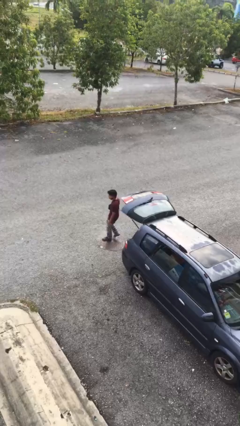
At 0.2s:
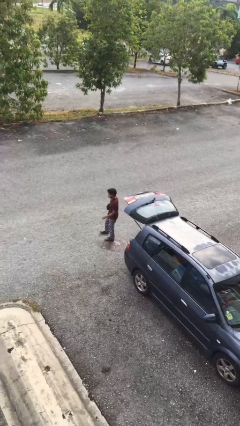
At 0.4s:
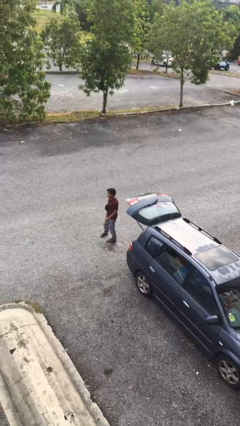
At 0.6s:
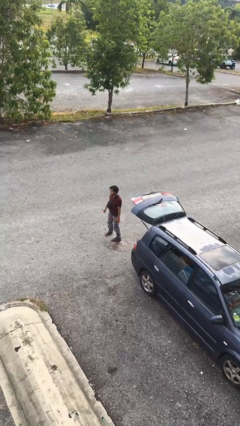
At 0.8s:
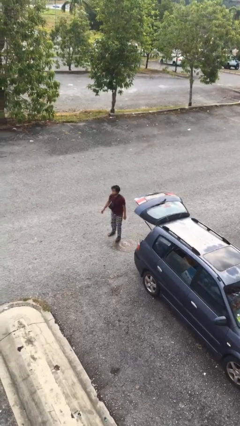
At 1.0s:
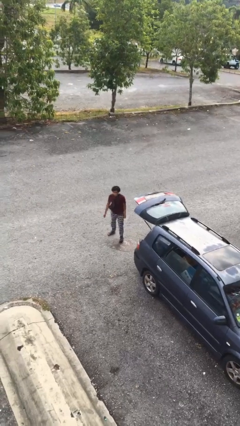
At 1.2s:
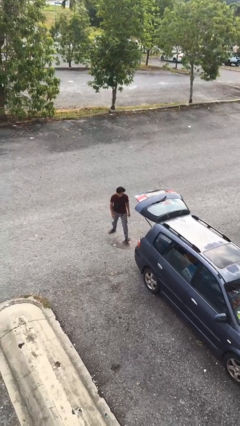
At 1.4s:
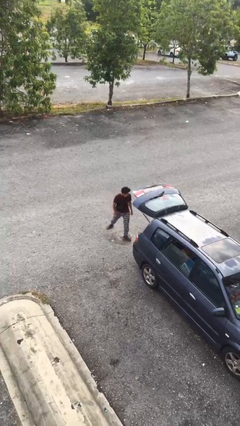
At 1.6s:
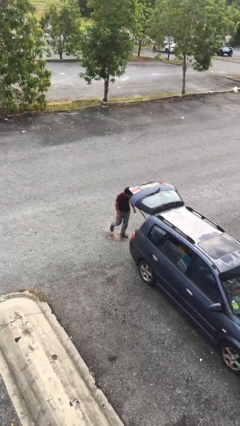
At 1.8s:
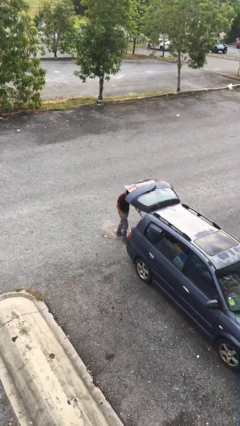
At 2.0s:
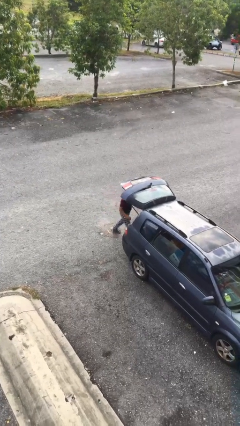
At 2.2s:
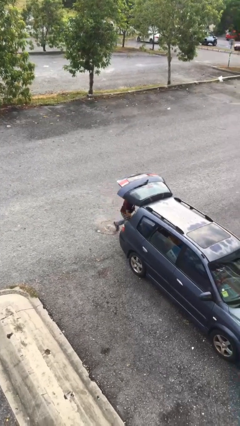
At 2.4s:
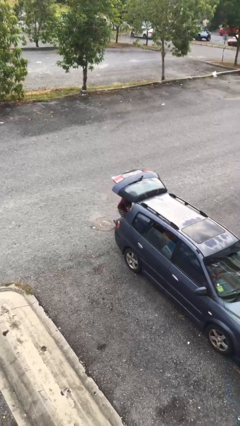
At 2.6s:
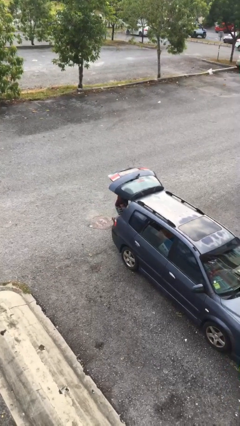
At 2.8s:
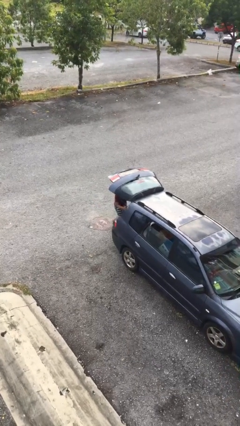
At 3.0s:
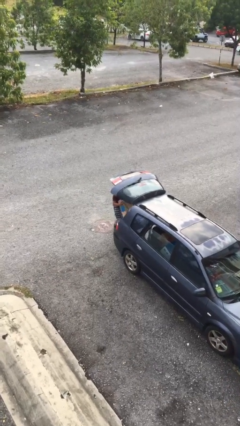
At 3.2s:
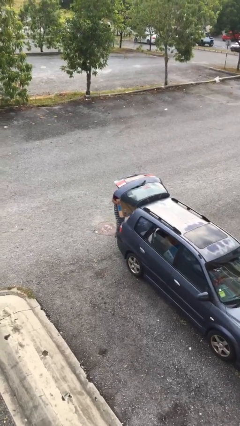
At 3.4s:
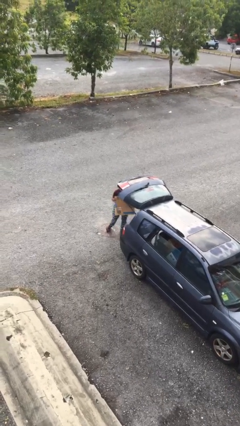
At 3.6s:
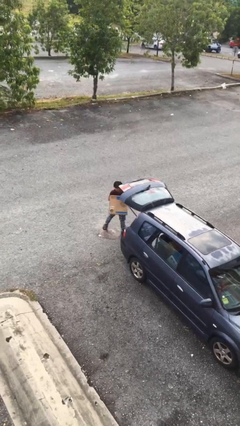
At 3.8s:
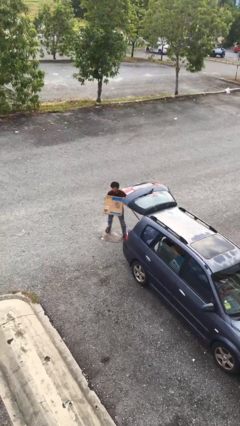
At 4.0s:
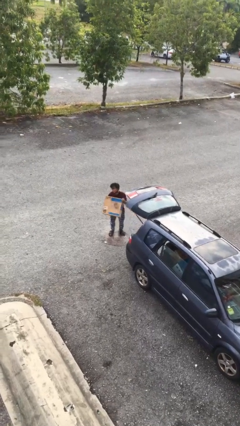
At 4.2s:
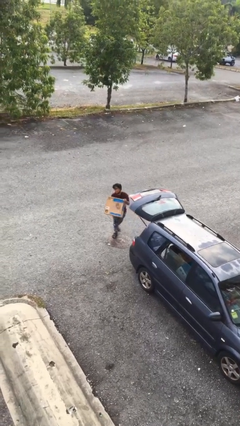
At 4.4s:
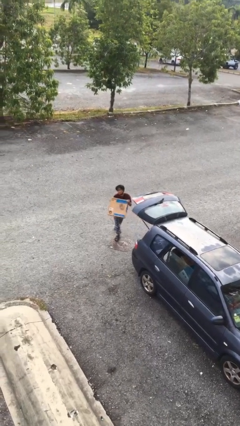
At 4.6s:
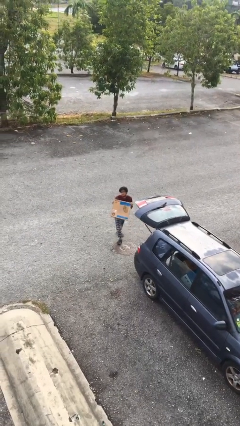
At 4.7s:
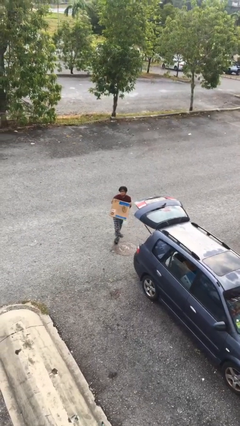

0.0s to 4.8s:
person unloads car

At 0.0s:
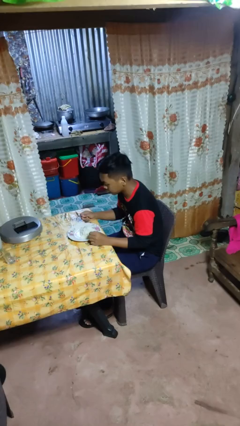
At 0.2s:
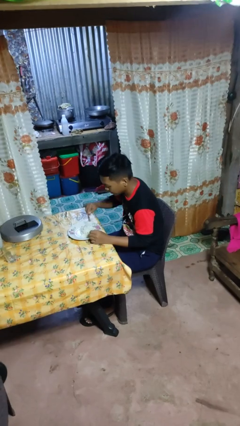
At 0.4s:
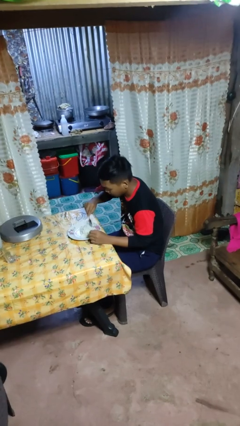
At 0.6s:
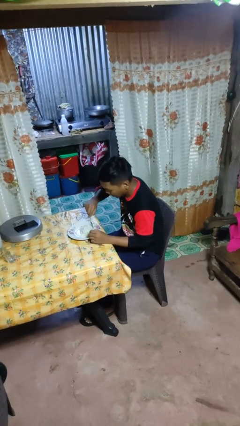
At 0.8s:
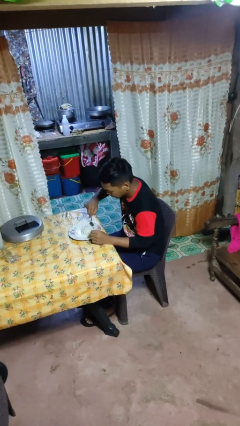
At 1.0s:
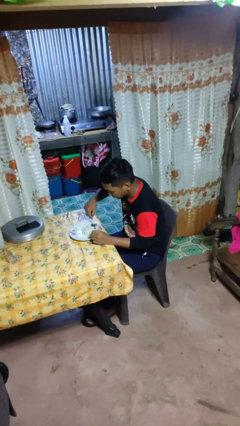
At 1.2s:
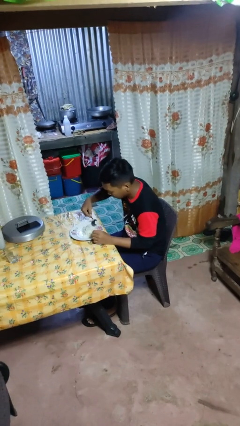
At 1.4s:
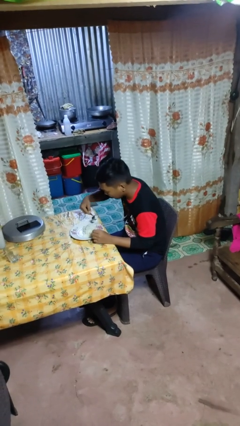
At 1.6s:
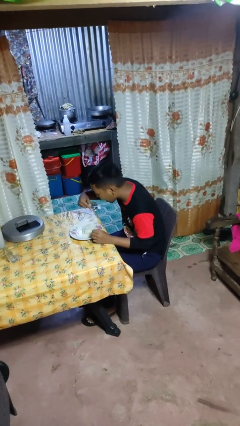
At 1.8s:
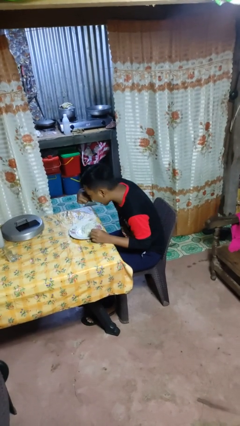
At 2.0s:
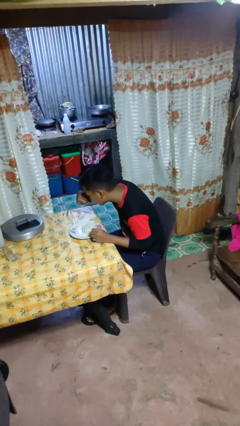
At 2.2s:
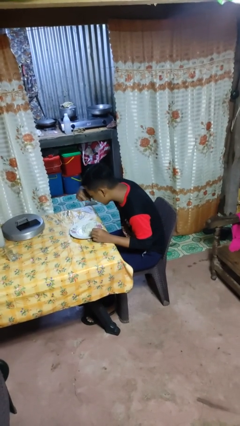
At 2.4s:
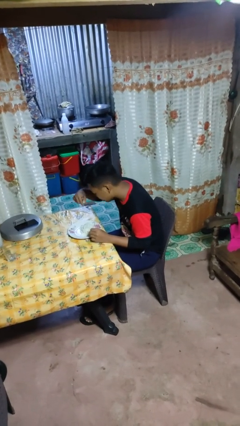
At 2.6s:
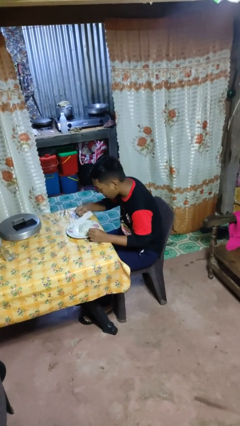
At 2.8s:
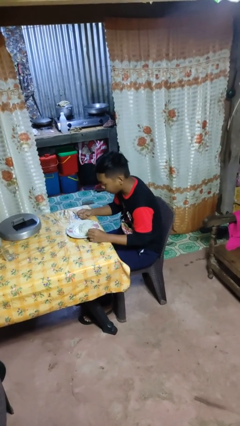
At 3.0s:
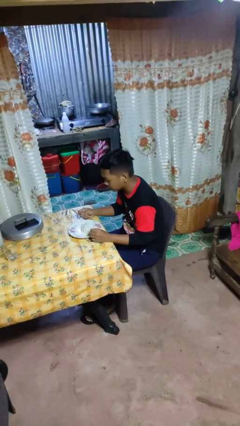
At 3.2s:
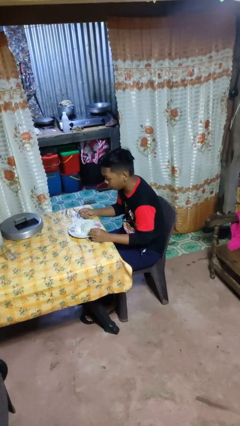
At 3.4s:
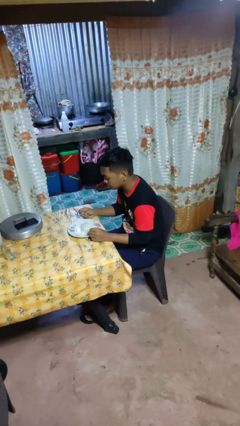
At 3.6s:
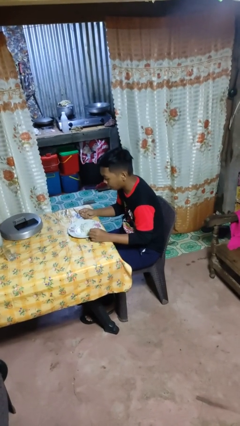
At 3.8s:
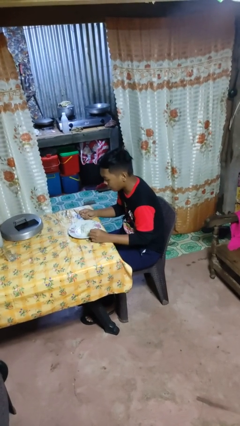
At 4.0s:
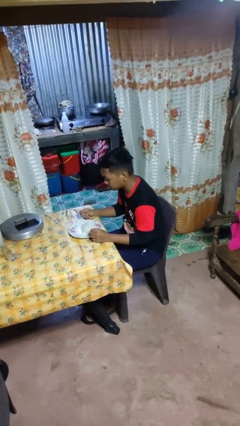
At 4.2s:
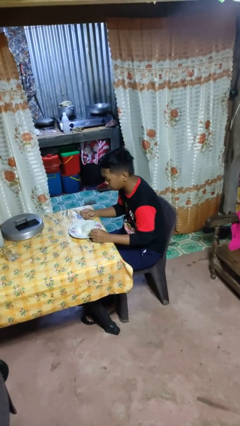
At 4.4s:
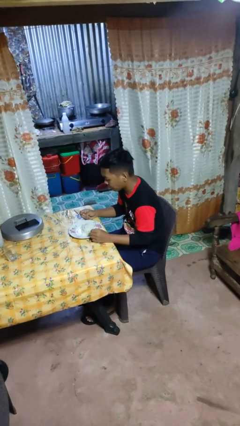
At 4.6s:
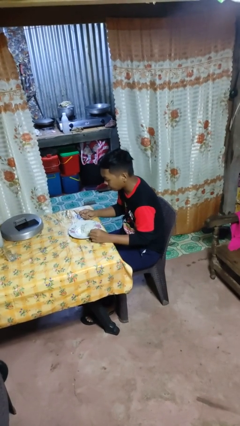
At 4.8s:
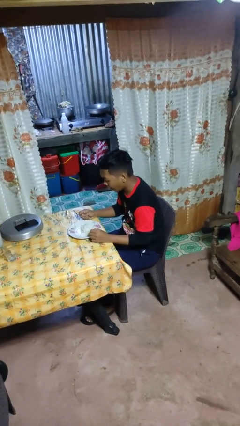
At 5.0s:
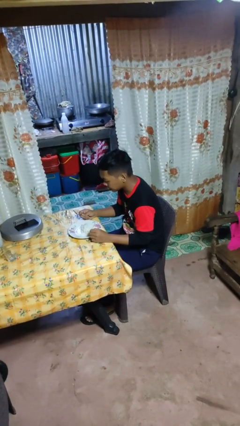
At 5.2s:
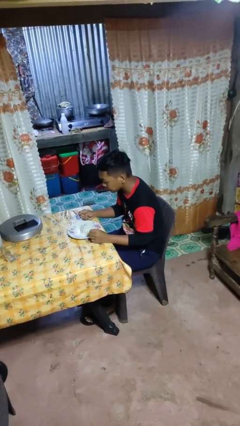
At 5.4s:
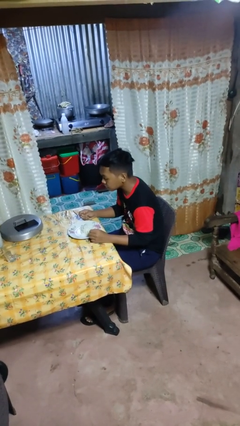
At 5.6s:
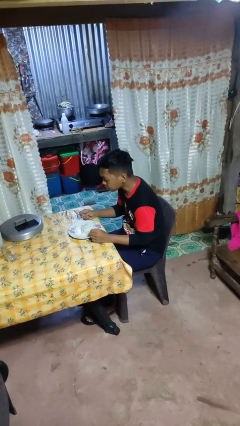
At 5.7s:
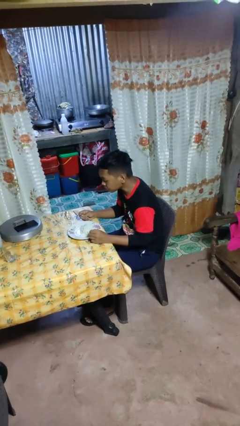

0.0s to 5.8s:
person eats with utensil

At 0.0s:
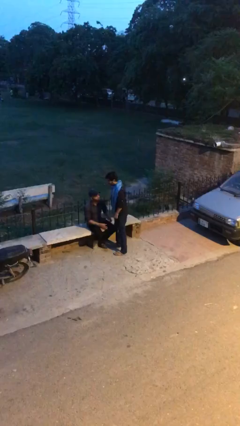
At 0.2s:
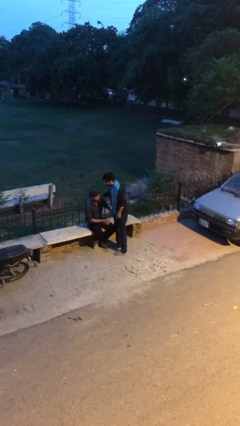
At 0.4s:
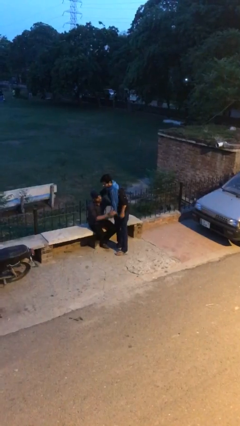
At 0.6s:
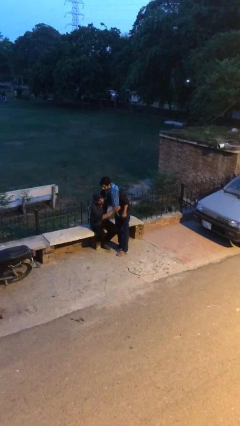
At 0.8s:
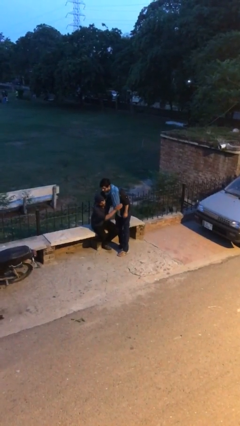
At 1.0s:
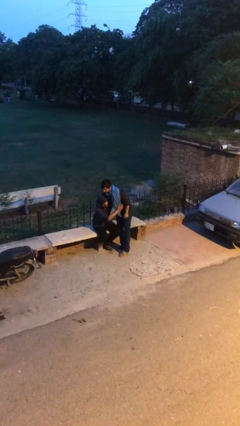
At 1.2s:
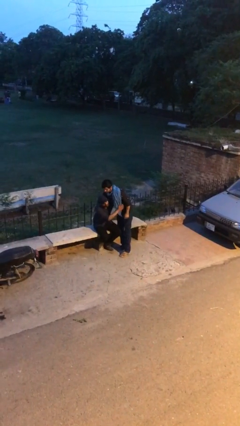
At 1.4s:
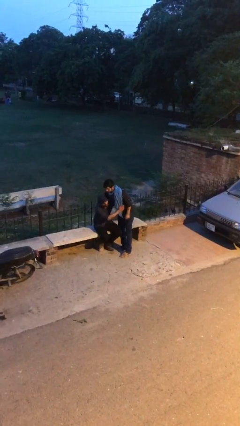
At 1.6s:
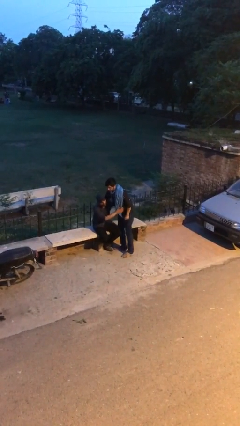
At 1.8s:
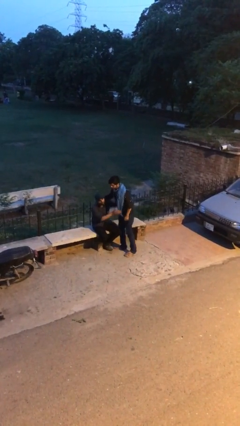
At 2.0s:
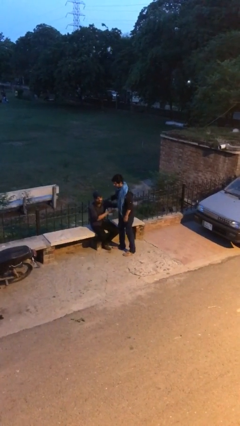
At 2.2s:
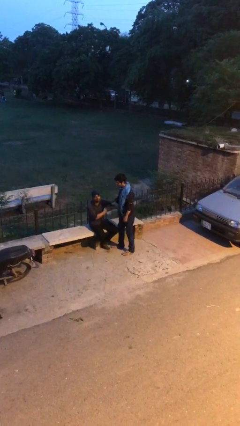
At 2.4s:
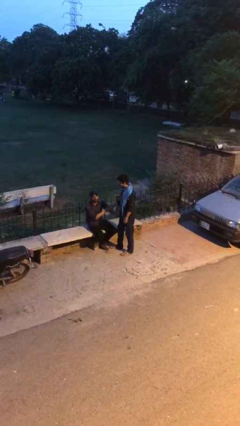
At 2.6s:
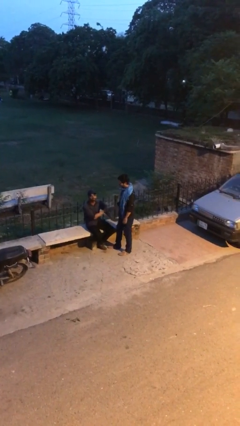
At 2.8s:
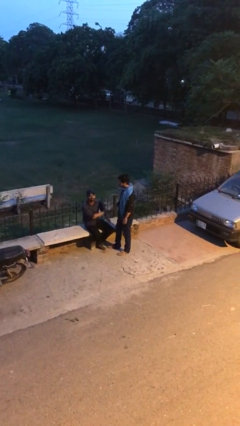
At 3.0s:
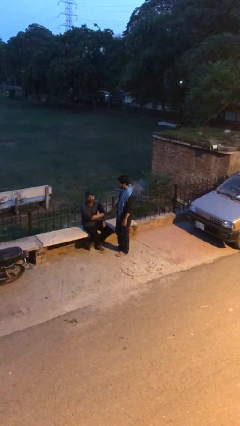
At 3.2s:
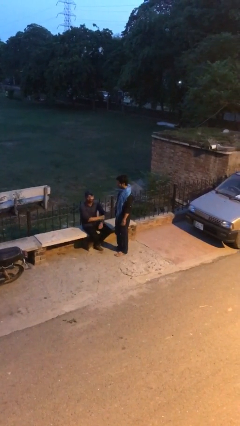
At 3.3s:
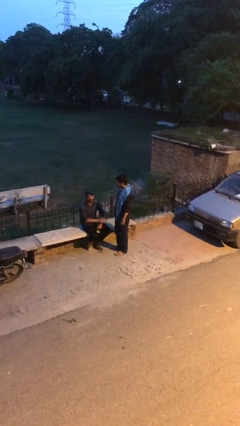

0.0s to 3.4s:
person embraces person

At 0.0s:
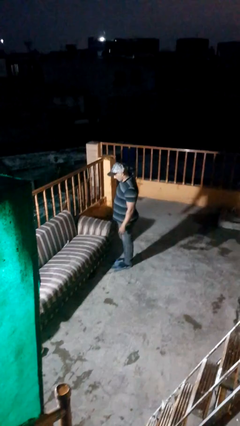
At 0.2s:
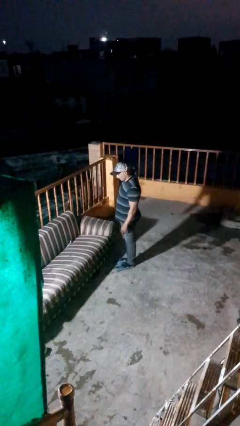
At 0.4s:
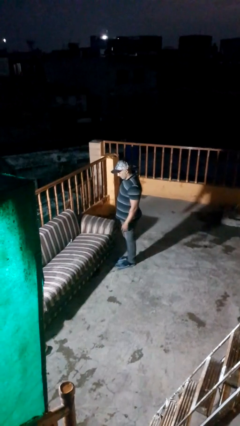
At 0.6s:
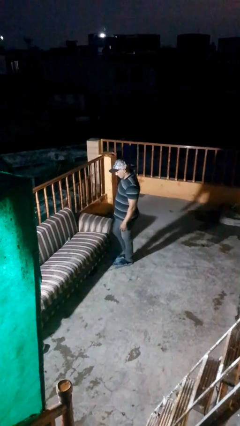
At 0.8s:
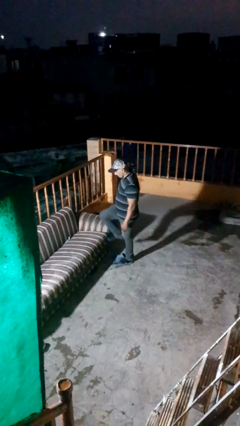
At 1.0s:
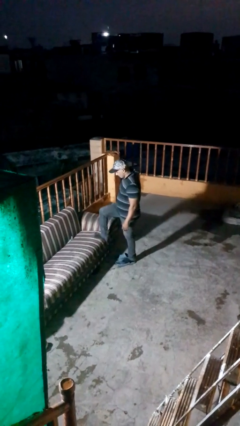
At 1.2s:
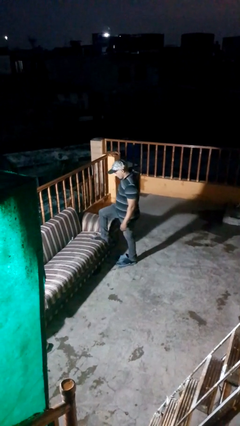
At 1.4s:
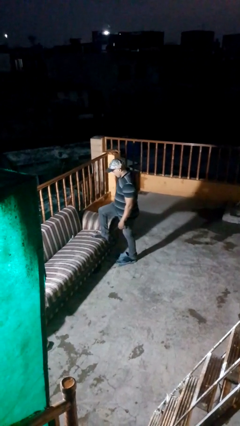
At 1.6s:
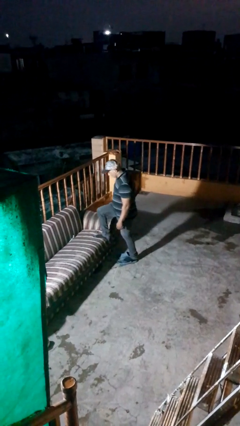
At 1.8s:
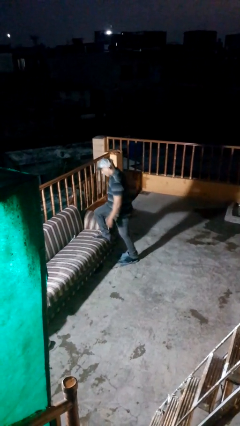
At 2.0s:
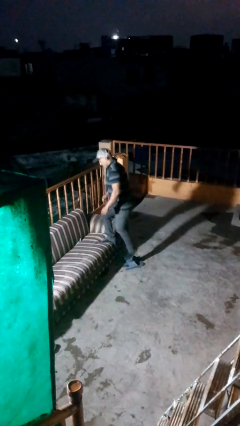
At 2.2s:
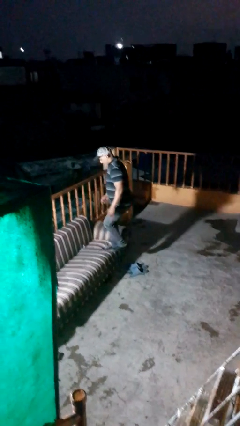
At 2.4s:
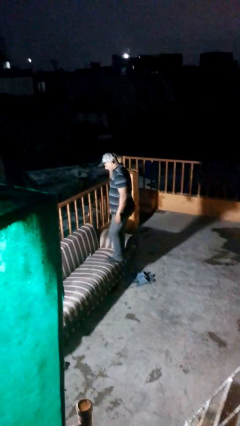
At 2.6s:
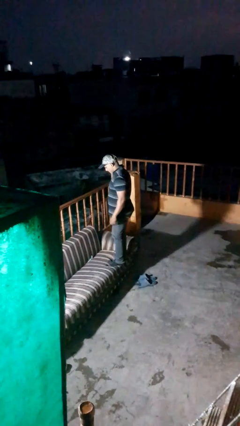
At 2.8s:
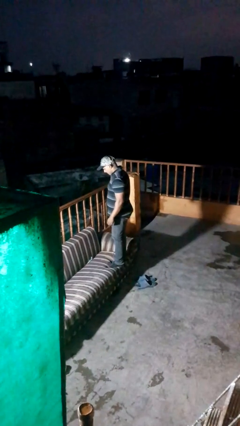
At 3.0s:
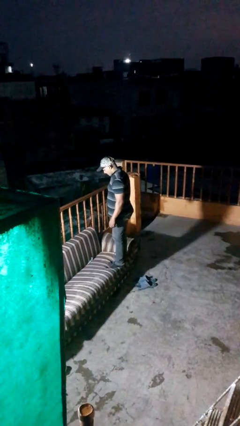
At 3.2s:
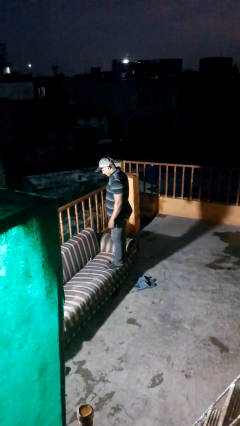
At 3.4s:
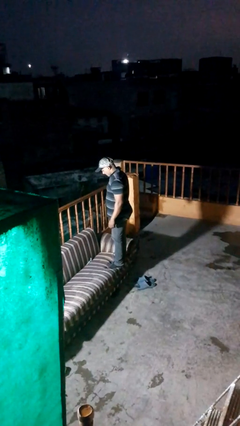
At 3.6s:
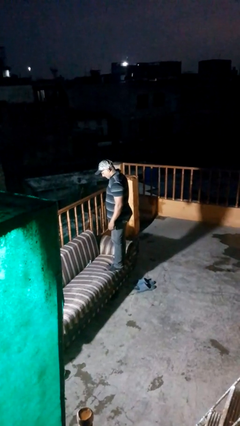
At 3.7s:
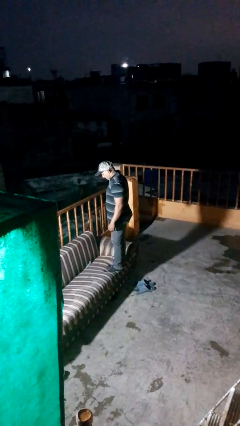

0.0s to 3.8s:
person climbs on couch
